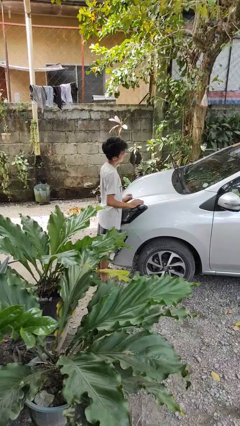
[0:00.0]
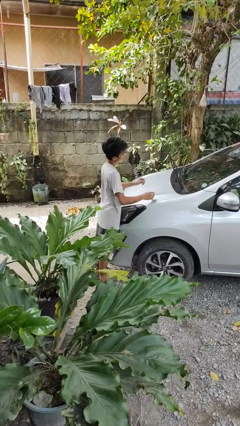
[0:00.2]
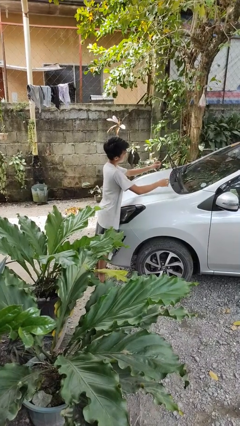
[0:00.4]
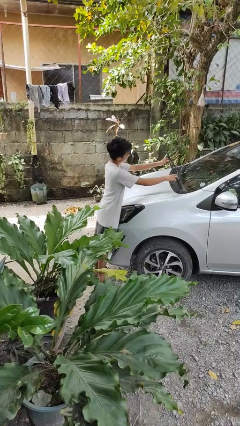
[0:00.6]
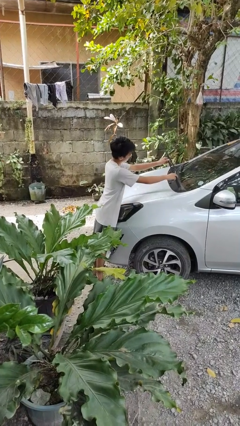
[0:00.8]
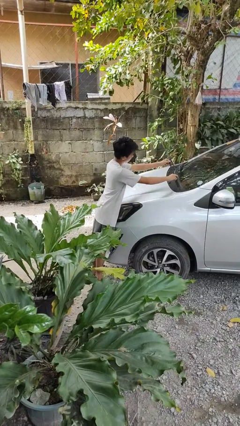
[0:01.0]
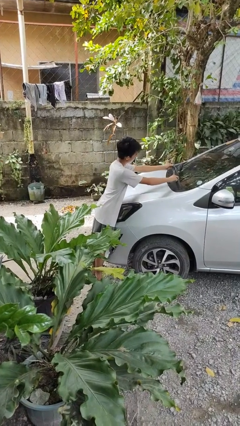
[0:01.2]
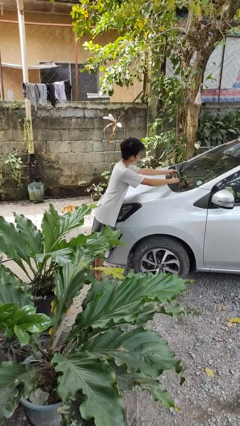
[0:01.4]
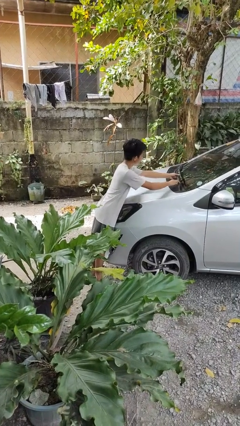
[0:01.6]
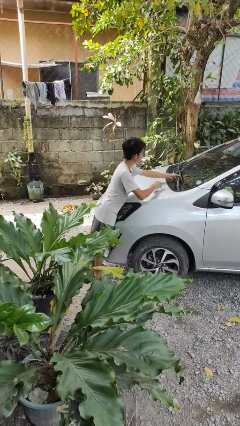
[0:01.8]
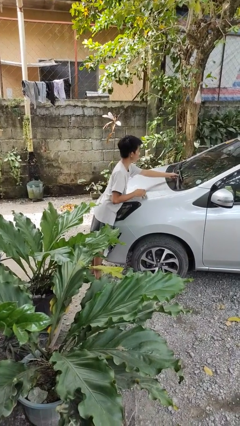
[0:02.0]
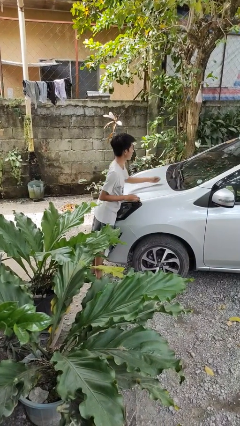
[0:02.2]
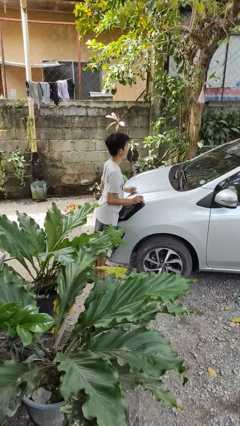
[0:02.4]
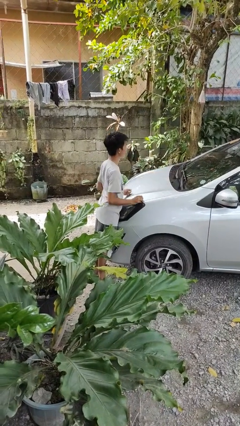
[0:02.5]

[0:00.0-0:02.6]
person flips down car wipers

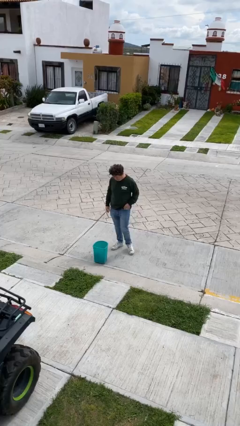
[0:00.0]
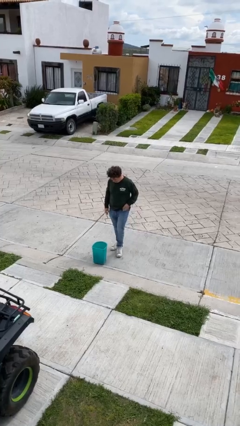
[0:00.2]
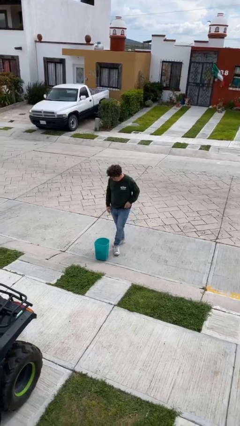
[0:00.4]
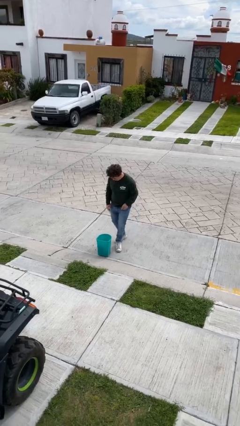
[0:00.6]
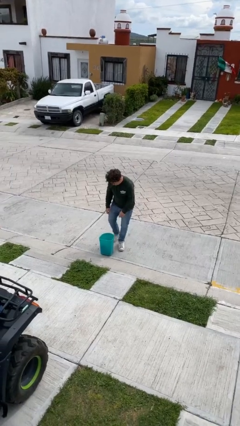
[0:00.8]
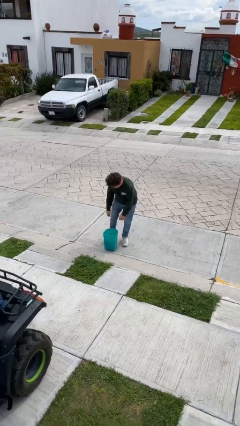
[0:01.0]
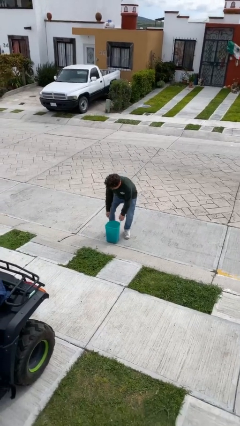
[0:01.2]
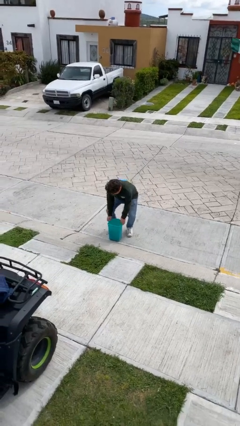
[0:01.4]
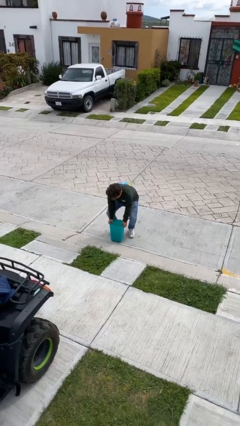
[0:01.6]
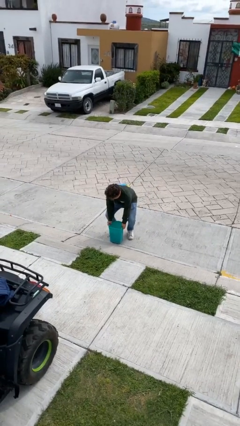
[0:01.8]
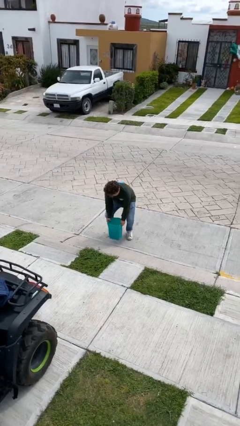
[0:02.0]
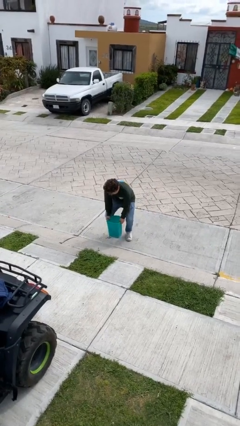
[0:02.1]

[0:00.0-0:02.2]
person picks up object from floor

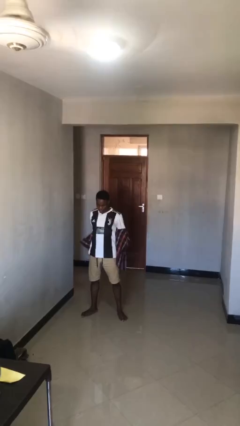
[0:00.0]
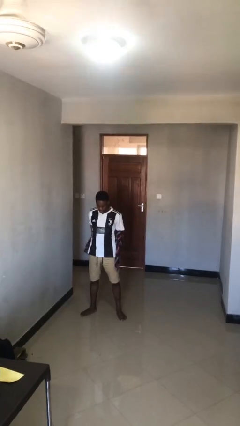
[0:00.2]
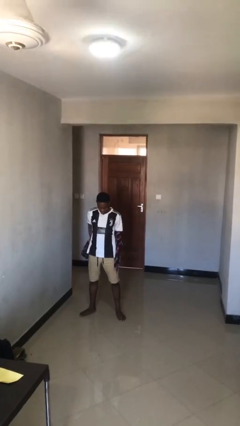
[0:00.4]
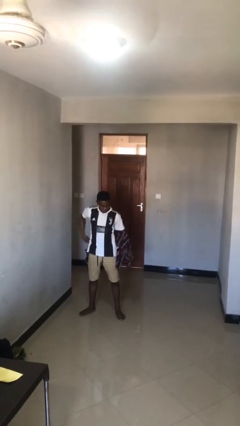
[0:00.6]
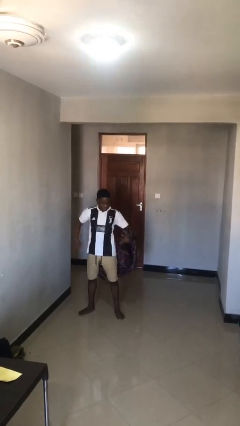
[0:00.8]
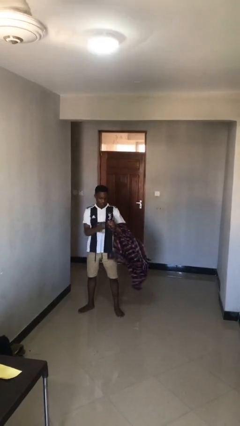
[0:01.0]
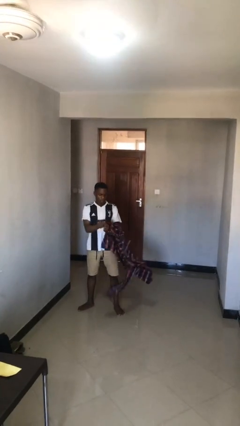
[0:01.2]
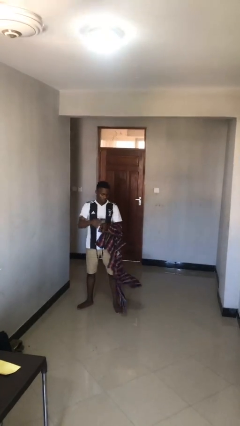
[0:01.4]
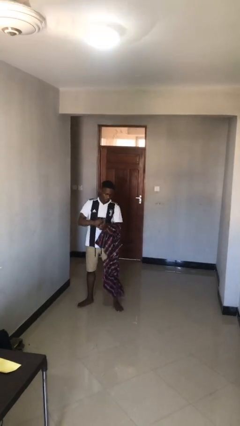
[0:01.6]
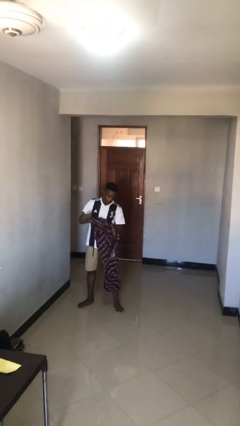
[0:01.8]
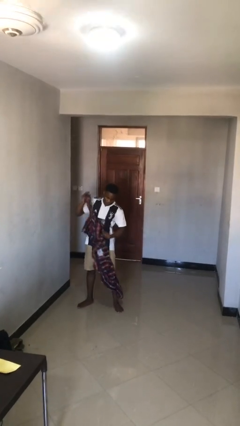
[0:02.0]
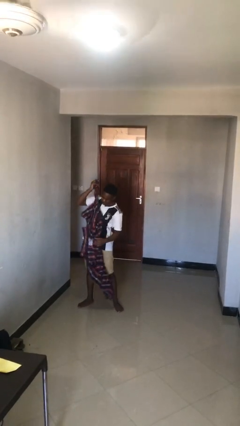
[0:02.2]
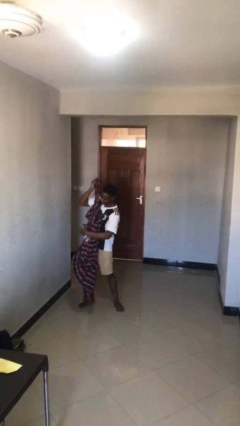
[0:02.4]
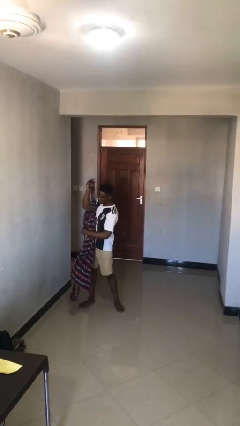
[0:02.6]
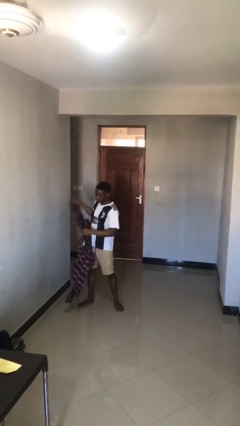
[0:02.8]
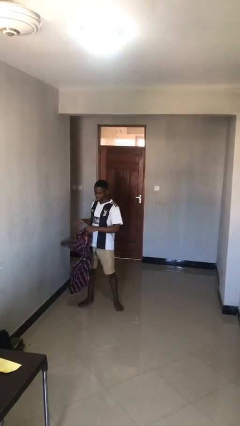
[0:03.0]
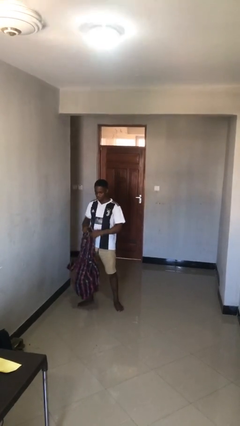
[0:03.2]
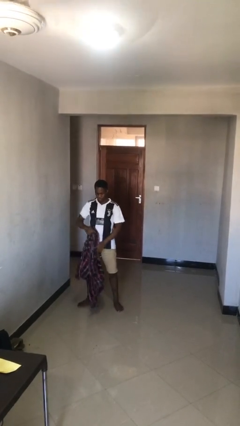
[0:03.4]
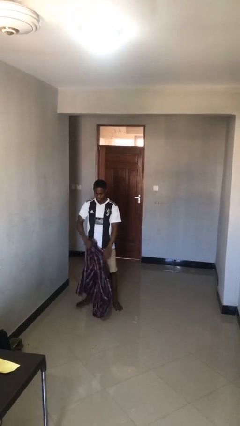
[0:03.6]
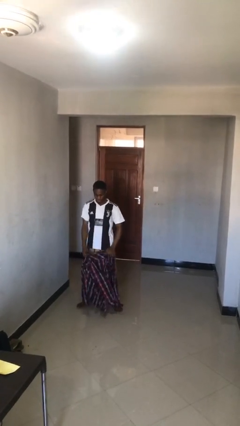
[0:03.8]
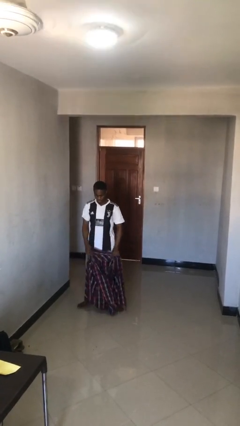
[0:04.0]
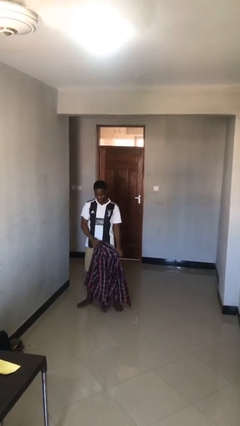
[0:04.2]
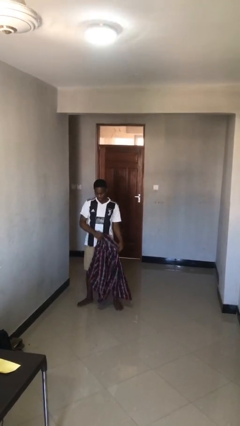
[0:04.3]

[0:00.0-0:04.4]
person takes off shirt

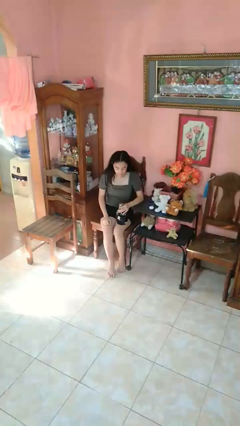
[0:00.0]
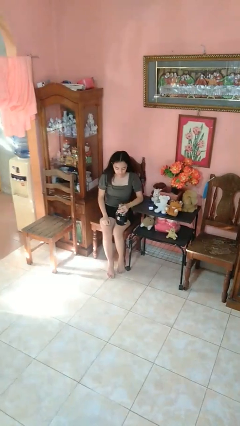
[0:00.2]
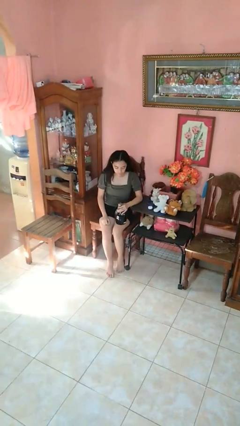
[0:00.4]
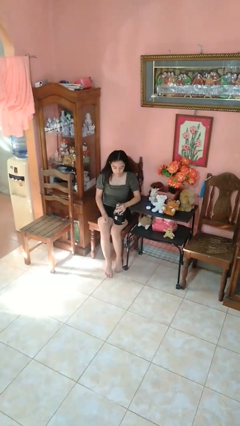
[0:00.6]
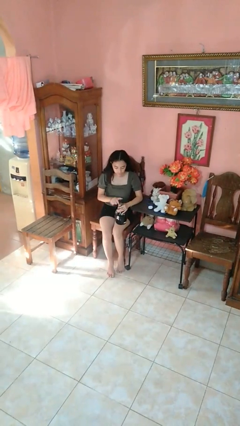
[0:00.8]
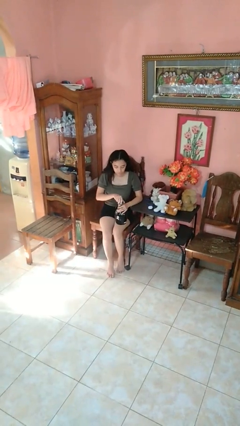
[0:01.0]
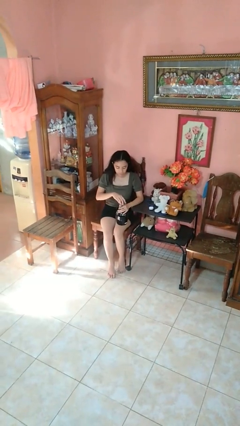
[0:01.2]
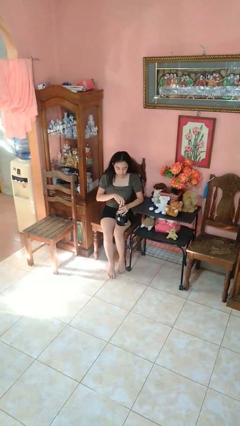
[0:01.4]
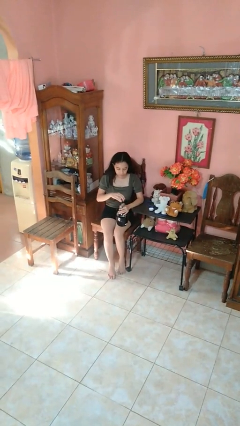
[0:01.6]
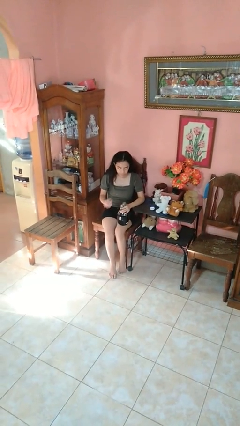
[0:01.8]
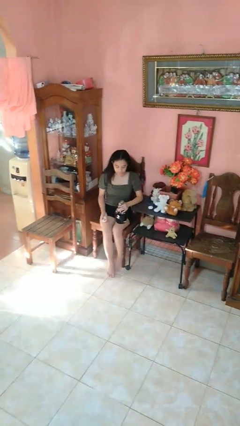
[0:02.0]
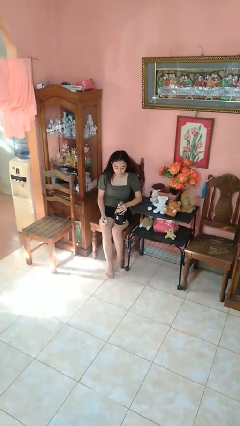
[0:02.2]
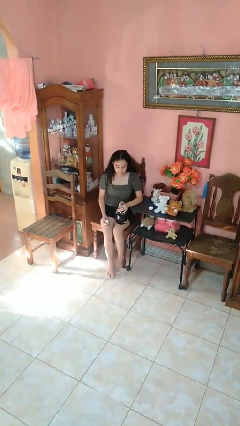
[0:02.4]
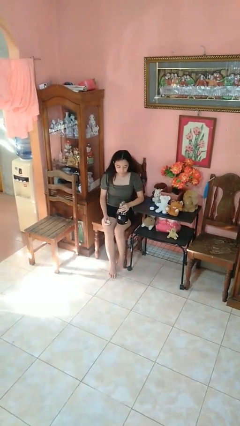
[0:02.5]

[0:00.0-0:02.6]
person unscrews lid from bottle

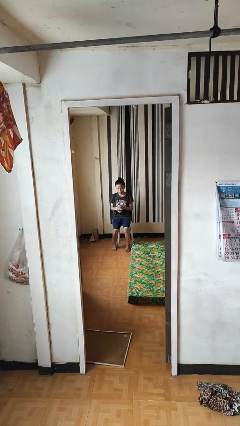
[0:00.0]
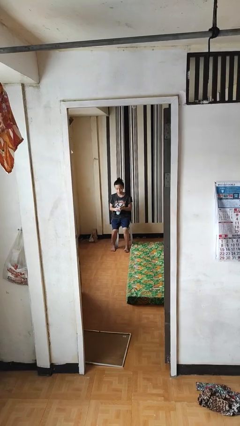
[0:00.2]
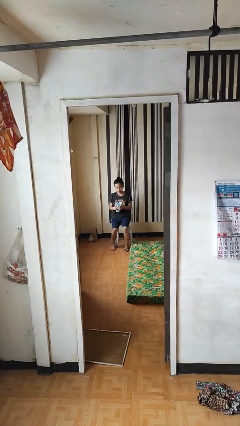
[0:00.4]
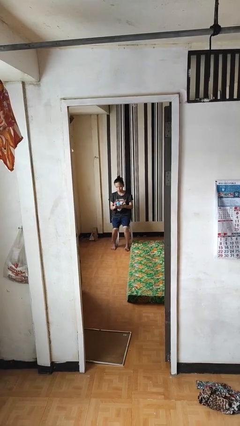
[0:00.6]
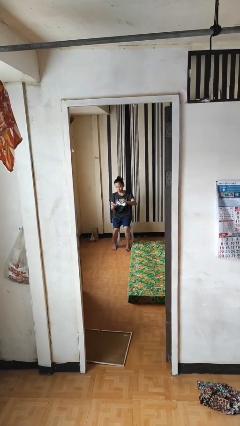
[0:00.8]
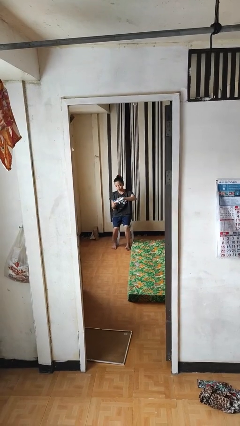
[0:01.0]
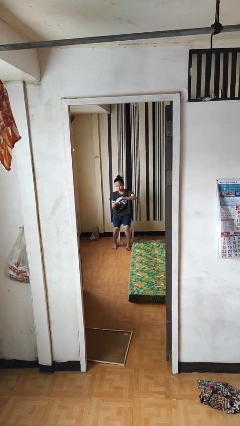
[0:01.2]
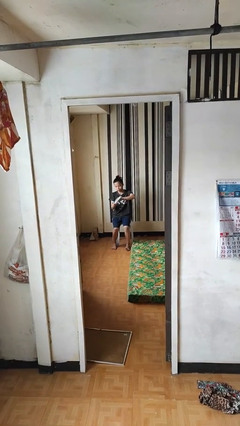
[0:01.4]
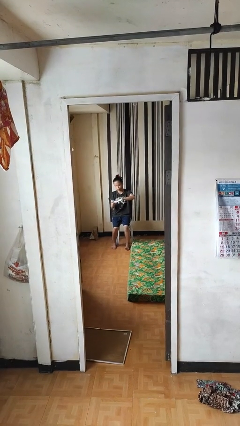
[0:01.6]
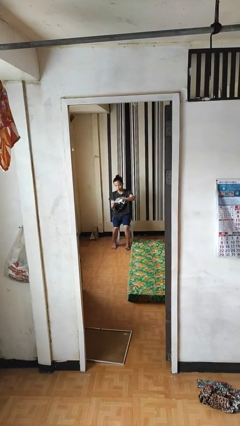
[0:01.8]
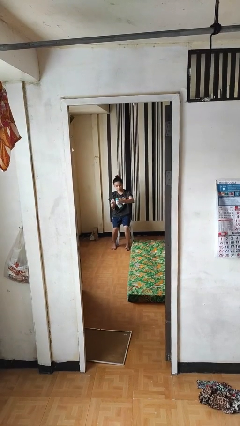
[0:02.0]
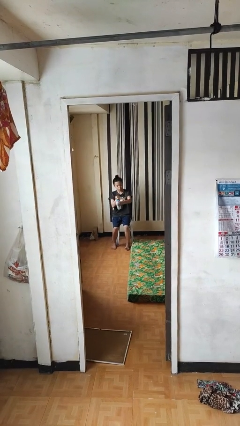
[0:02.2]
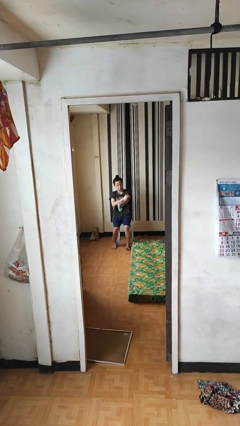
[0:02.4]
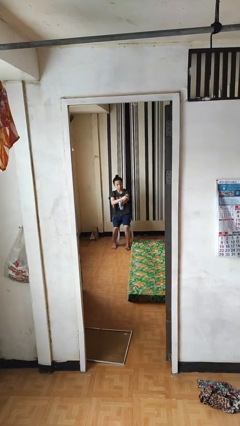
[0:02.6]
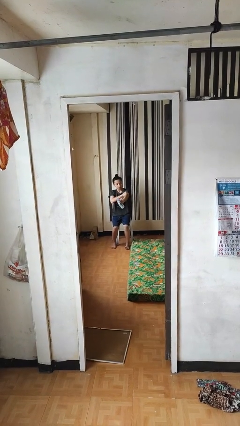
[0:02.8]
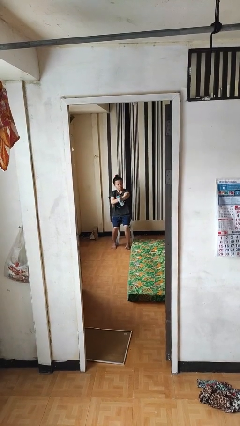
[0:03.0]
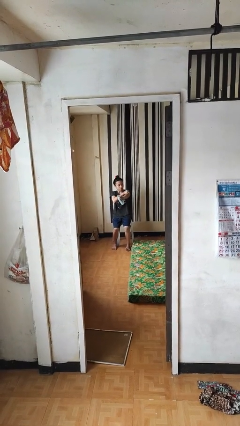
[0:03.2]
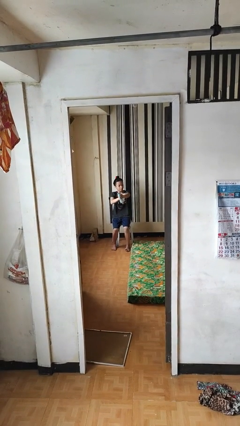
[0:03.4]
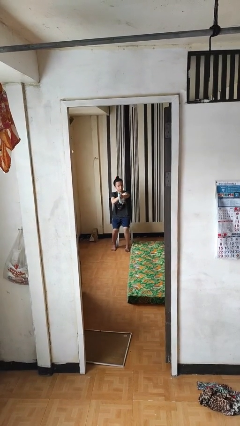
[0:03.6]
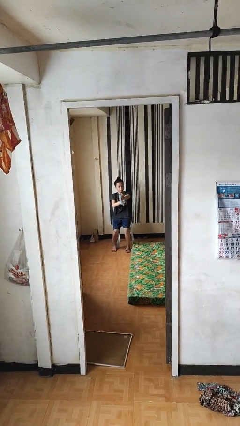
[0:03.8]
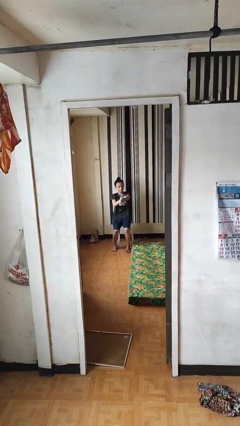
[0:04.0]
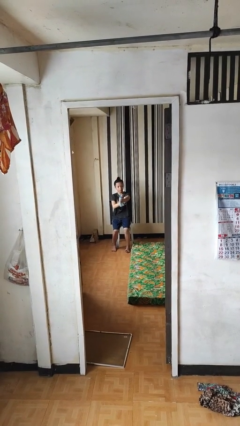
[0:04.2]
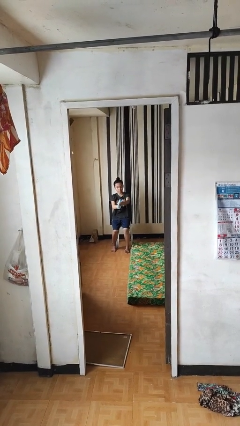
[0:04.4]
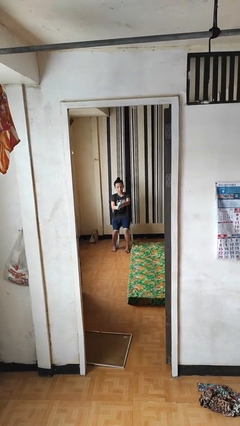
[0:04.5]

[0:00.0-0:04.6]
person applies sunscreen

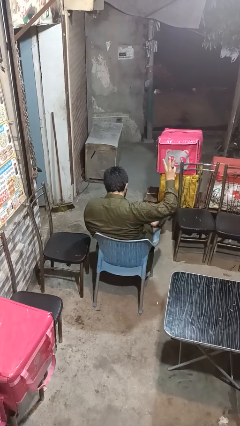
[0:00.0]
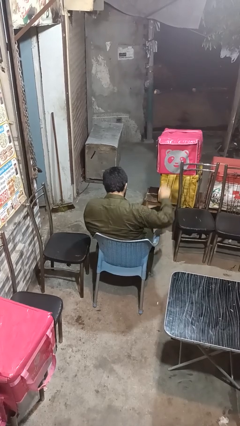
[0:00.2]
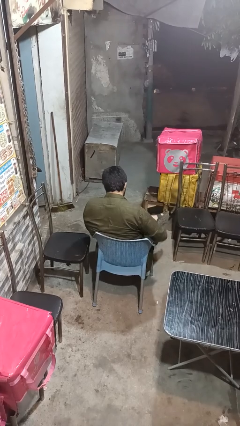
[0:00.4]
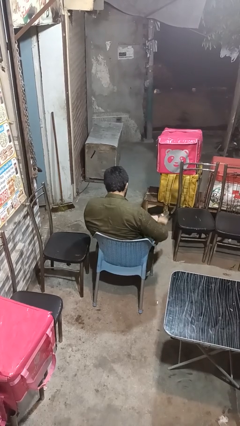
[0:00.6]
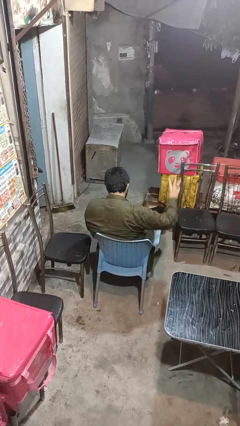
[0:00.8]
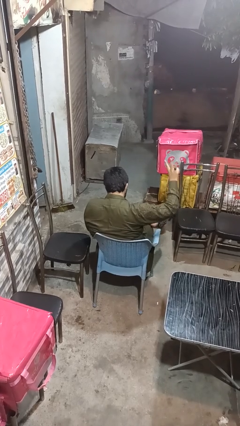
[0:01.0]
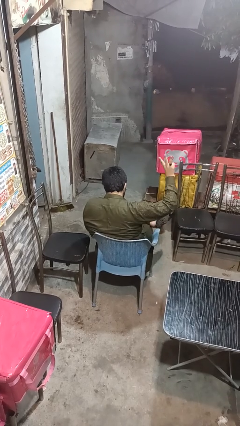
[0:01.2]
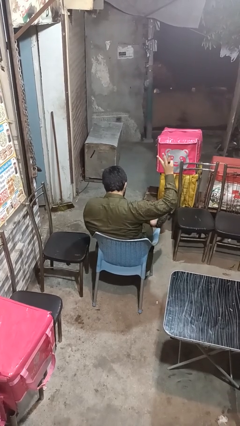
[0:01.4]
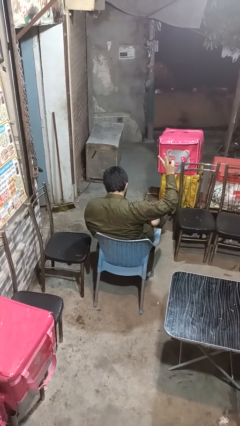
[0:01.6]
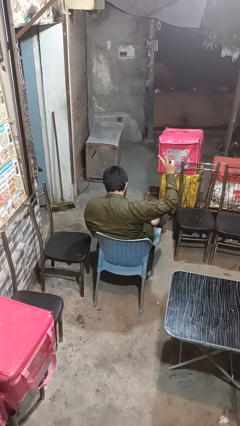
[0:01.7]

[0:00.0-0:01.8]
person gestures number three
